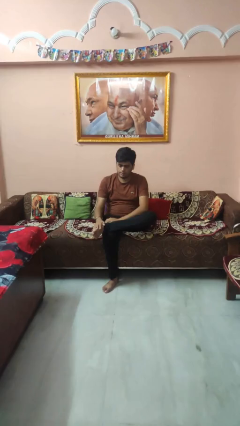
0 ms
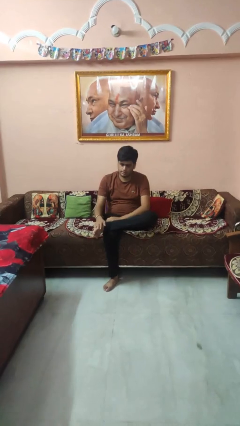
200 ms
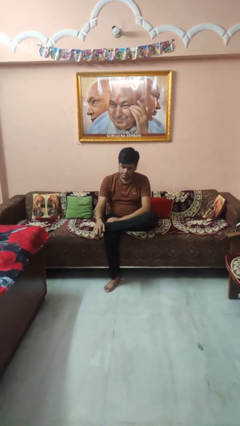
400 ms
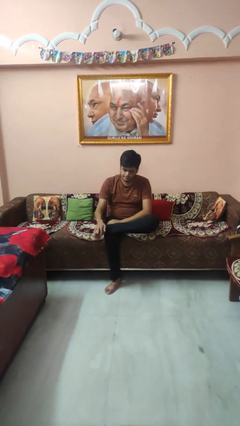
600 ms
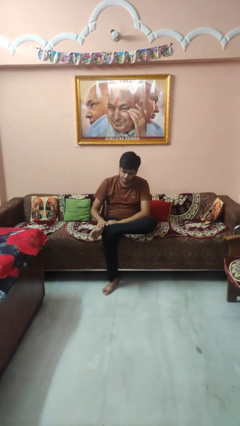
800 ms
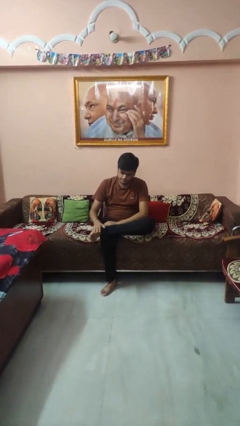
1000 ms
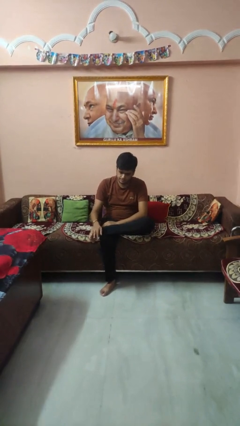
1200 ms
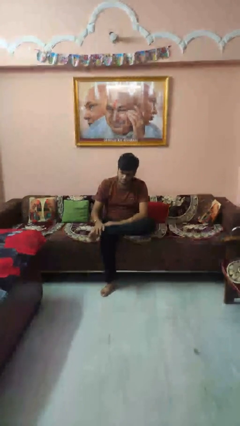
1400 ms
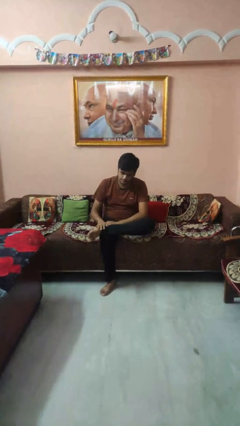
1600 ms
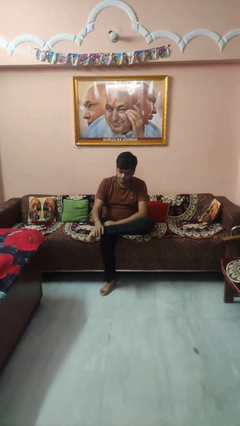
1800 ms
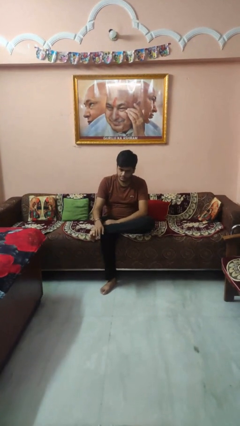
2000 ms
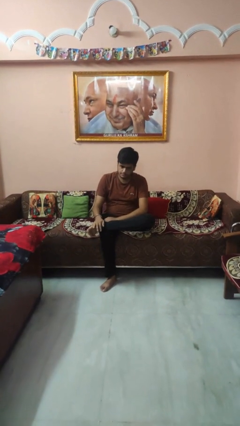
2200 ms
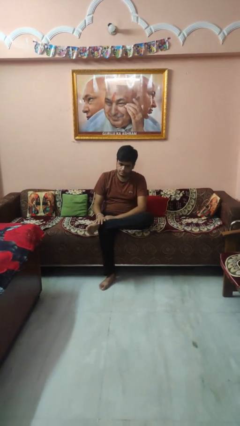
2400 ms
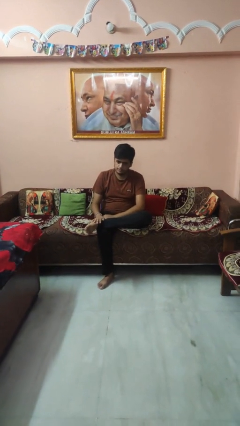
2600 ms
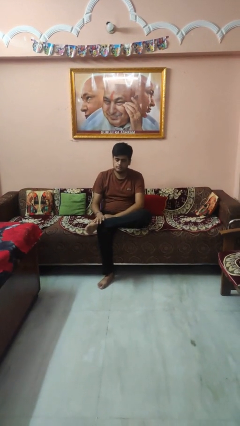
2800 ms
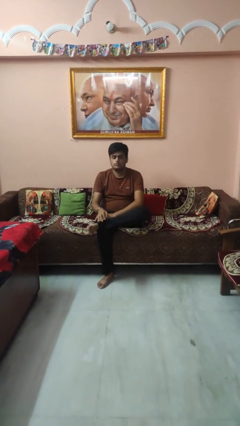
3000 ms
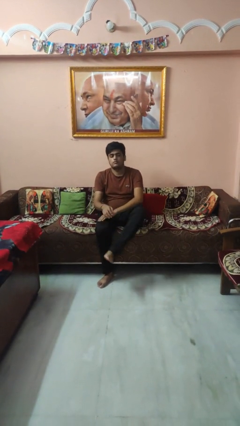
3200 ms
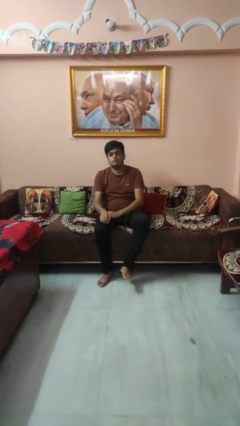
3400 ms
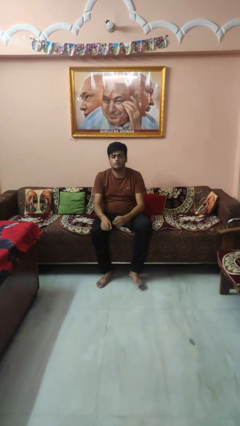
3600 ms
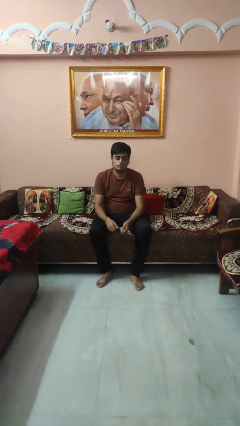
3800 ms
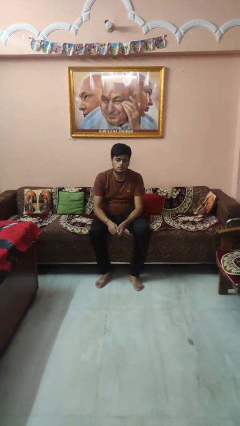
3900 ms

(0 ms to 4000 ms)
person rubs foot

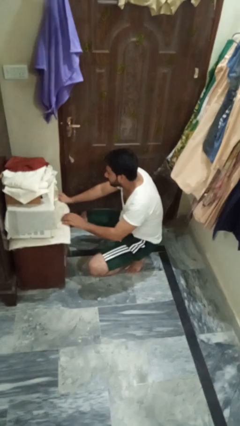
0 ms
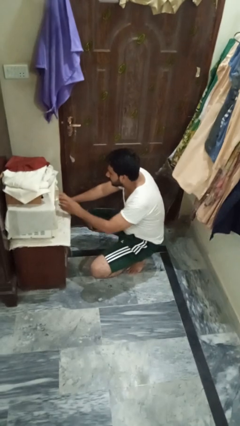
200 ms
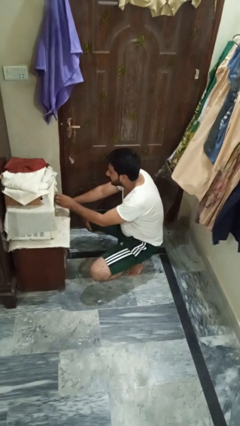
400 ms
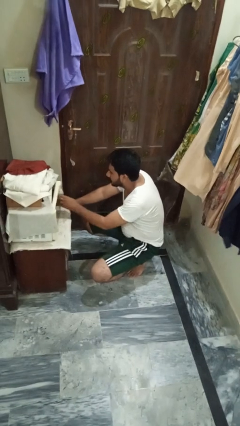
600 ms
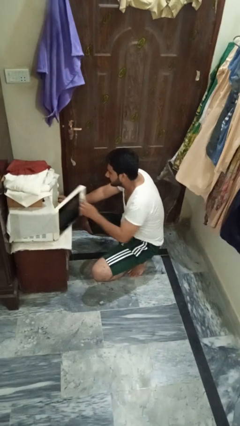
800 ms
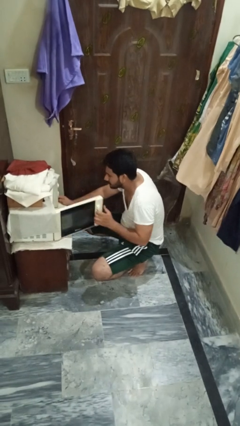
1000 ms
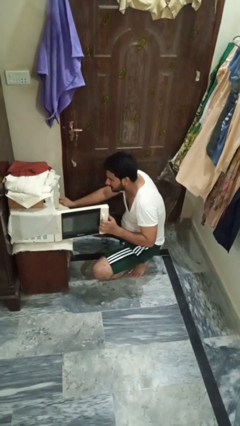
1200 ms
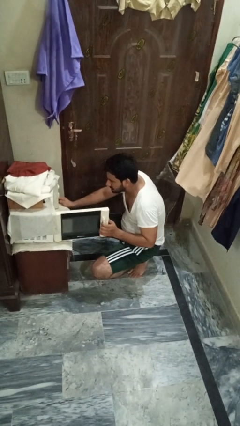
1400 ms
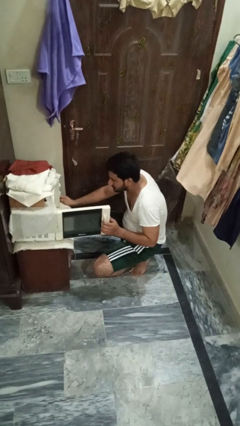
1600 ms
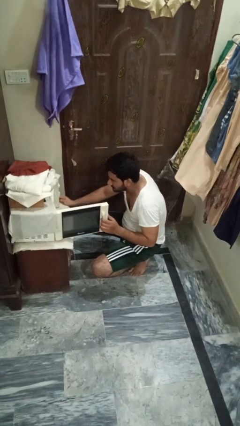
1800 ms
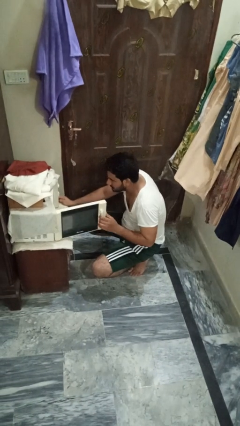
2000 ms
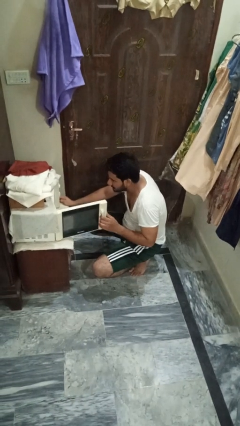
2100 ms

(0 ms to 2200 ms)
person opens oven door

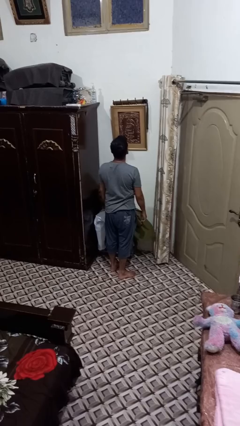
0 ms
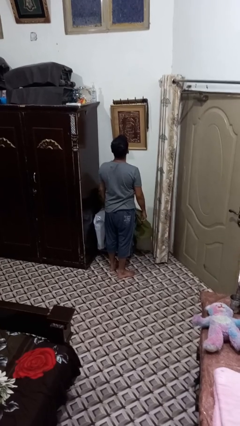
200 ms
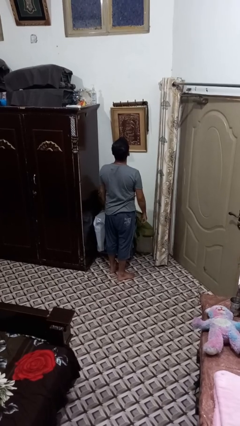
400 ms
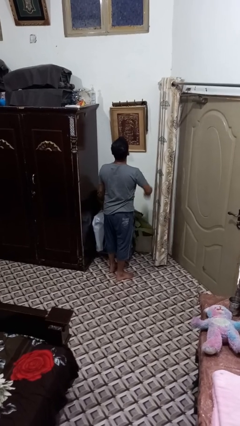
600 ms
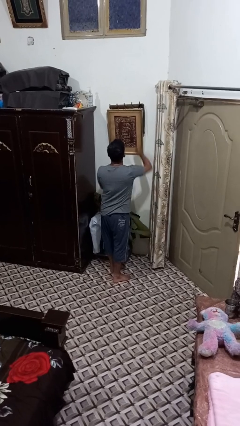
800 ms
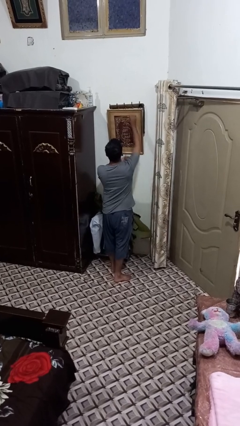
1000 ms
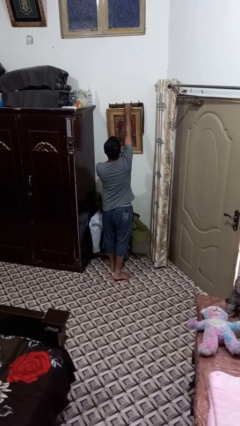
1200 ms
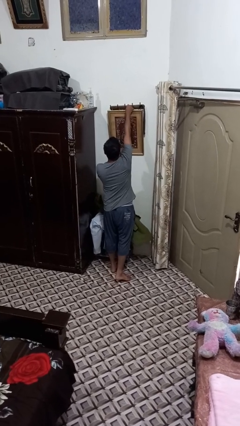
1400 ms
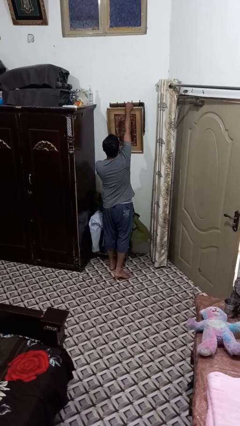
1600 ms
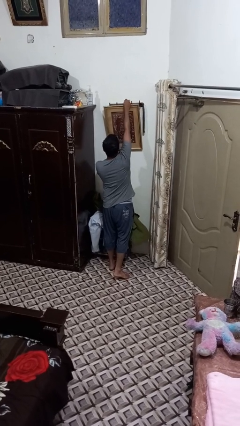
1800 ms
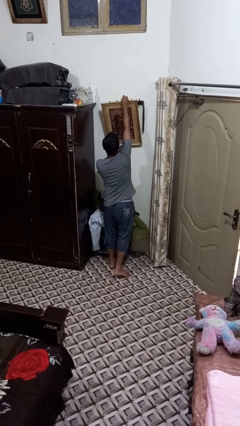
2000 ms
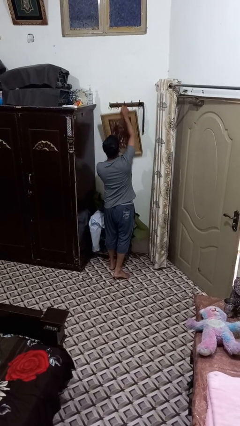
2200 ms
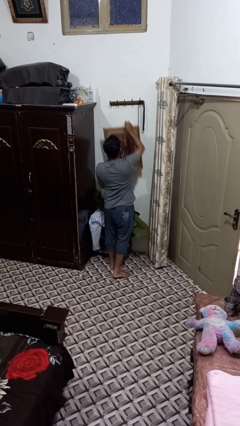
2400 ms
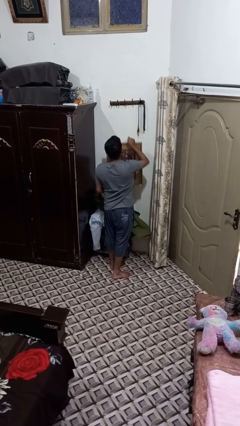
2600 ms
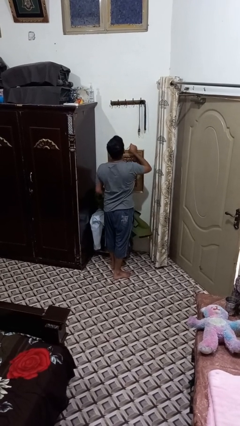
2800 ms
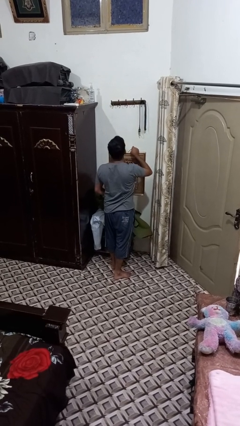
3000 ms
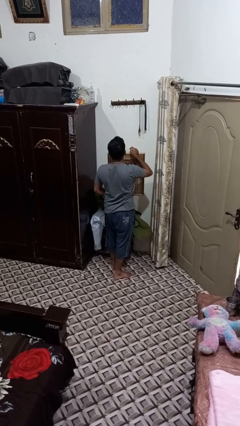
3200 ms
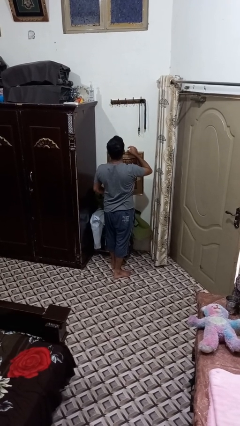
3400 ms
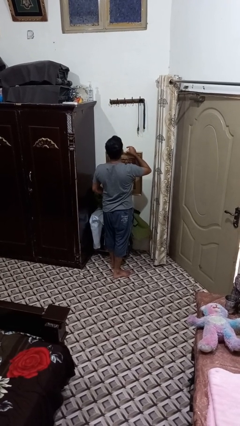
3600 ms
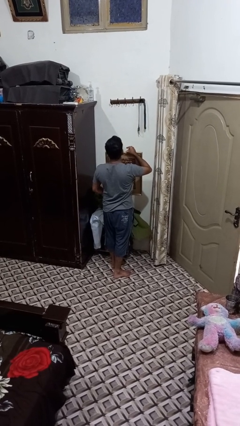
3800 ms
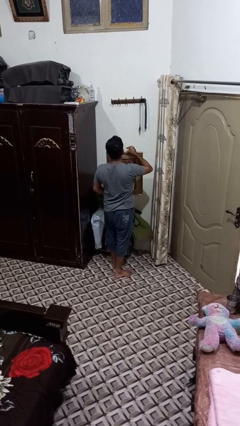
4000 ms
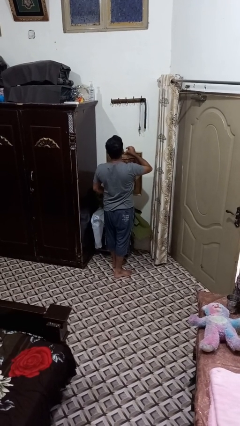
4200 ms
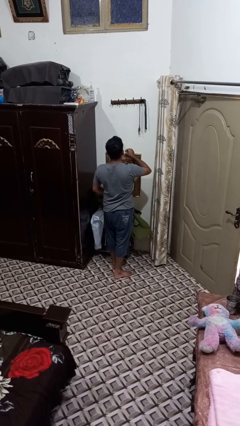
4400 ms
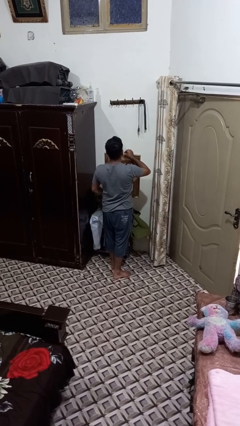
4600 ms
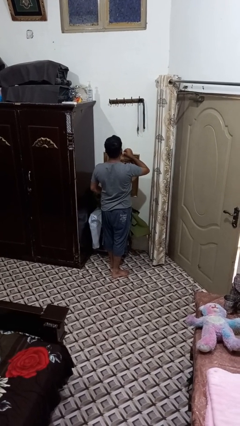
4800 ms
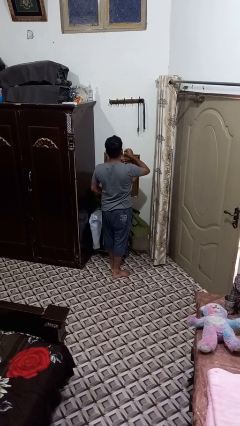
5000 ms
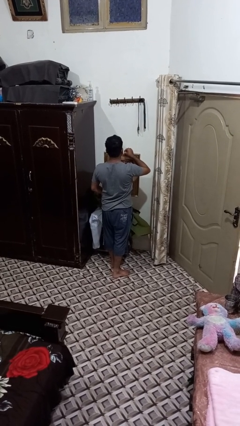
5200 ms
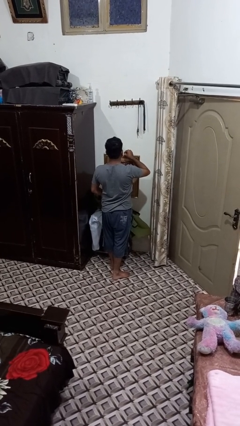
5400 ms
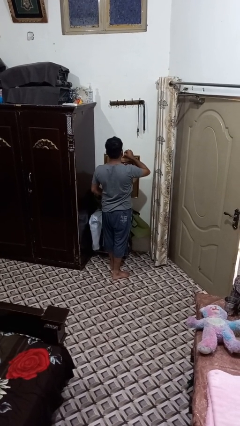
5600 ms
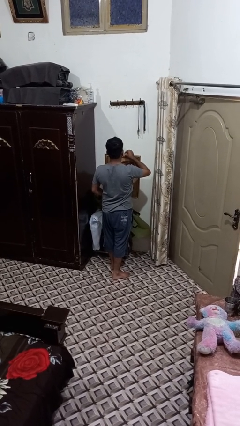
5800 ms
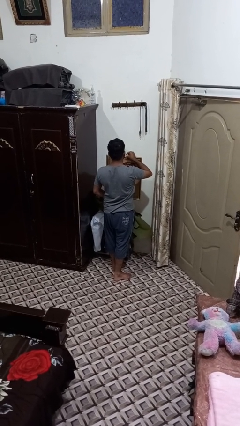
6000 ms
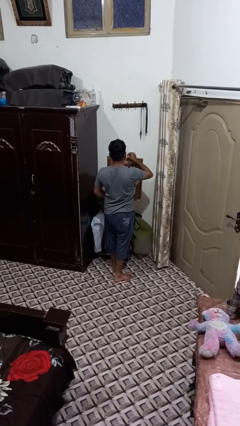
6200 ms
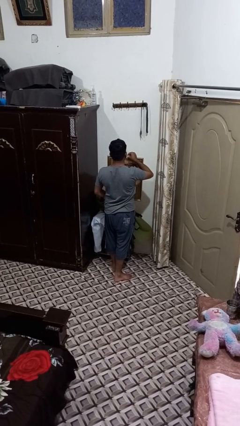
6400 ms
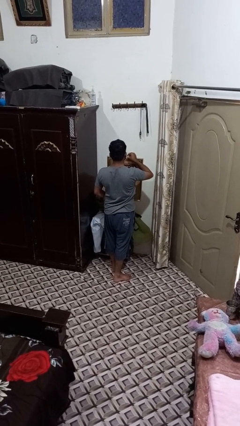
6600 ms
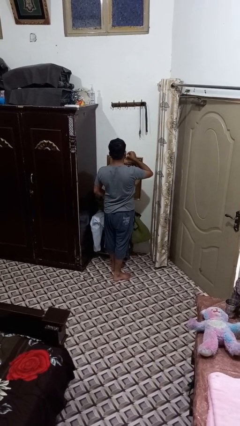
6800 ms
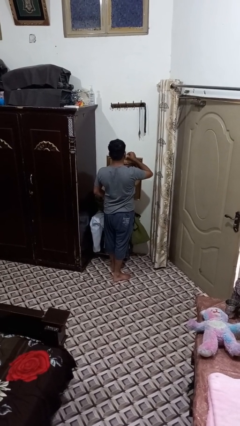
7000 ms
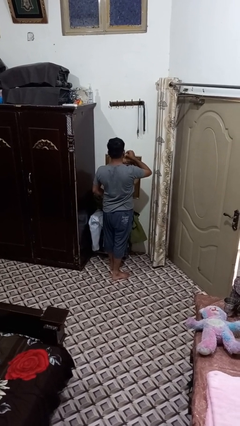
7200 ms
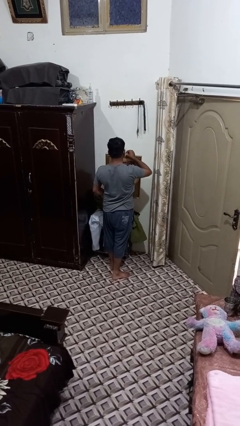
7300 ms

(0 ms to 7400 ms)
person takes down picture frame

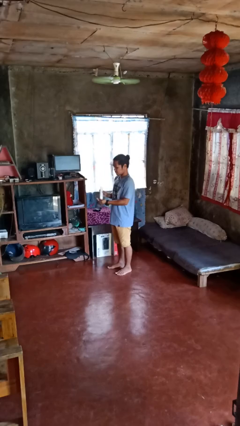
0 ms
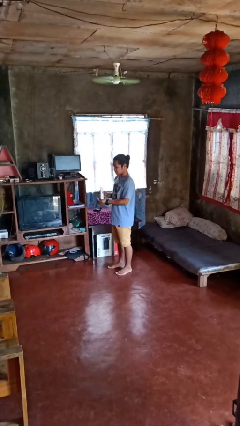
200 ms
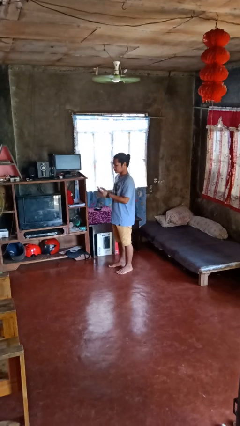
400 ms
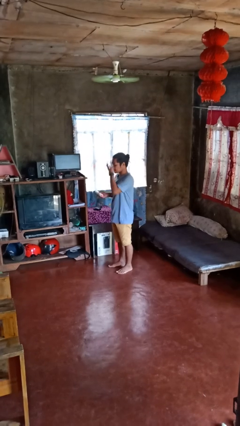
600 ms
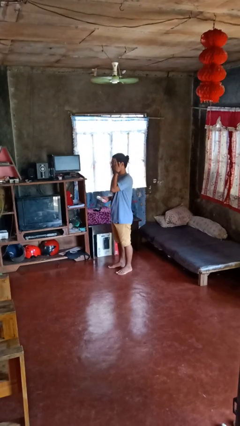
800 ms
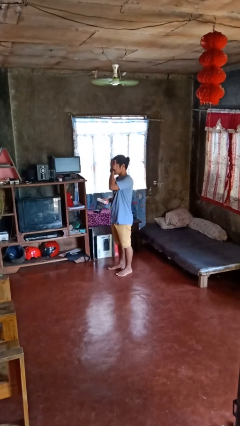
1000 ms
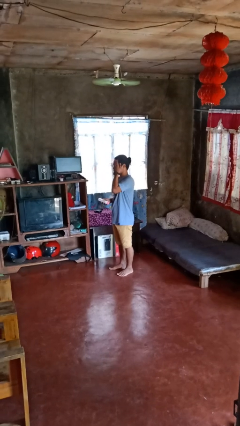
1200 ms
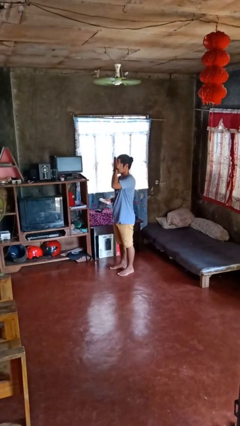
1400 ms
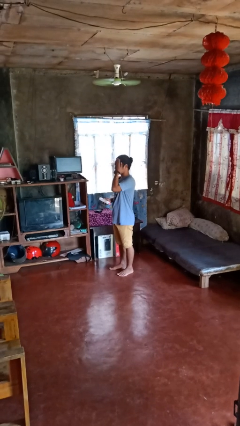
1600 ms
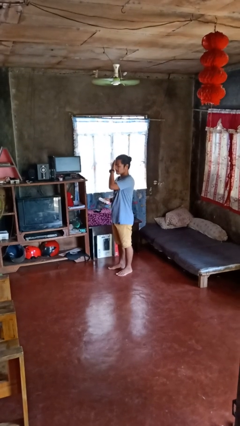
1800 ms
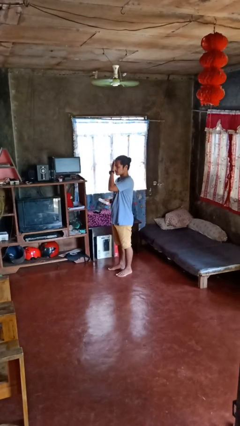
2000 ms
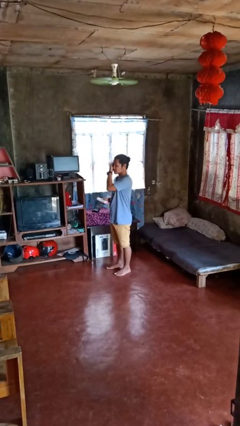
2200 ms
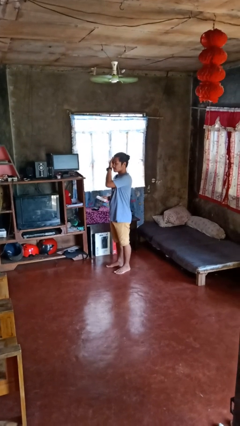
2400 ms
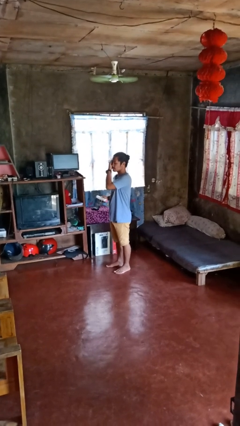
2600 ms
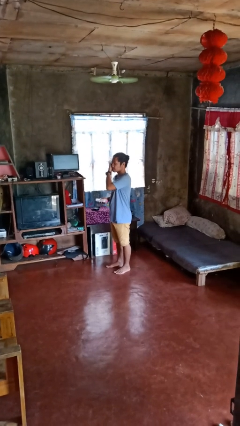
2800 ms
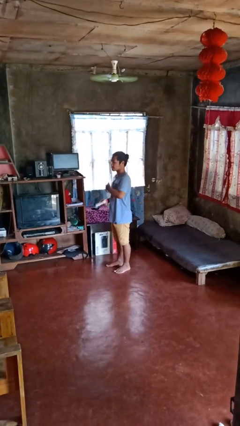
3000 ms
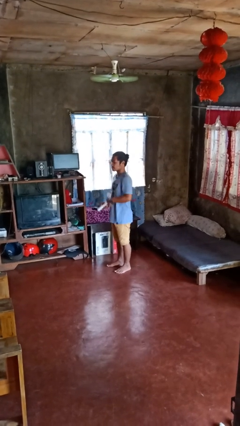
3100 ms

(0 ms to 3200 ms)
person applies facial moisturizer

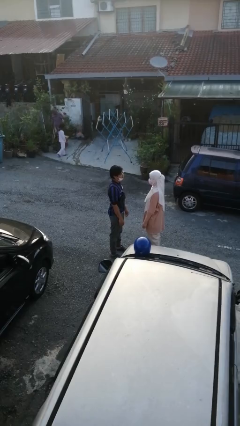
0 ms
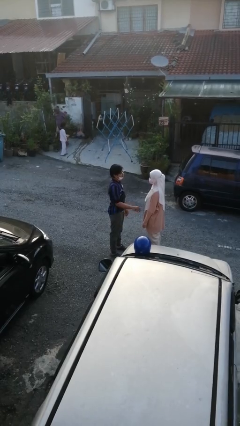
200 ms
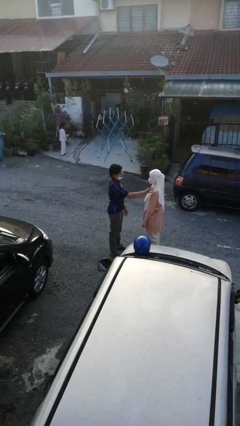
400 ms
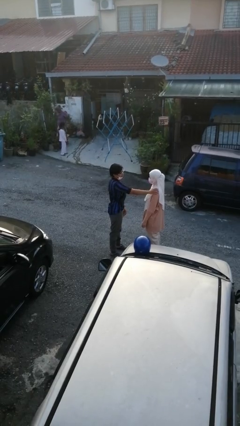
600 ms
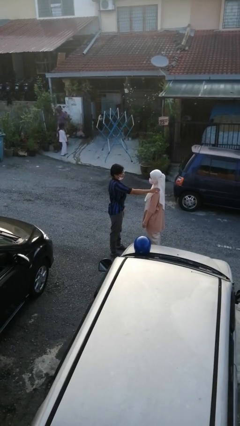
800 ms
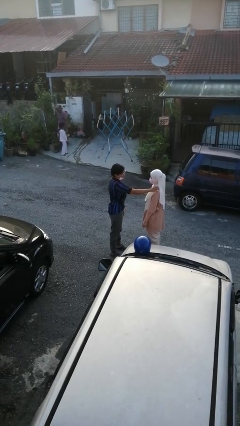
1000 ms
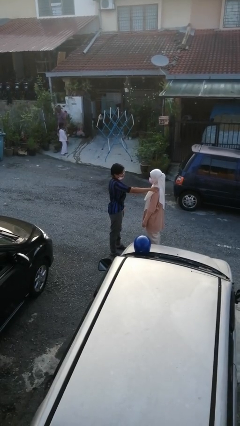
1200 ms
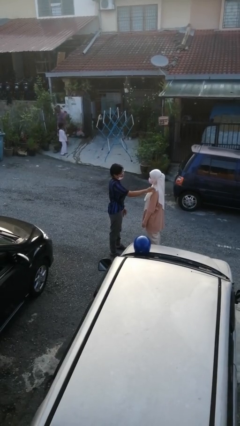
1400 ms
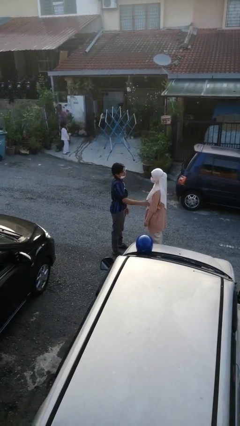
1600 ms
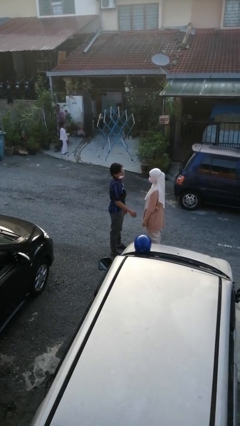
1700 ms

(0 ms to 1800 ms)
person pounds shoulders of person
